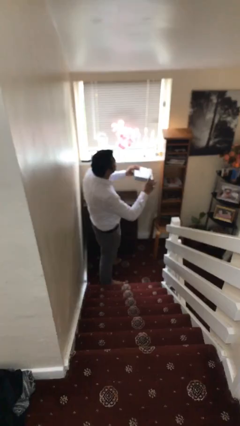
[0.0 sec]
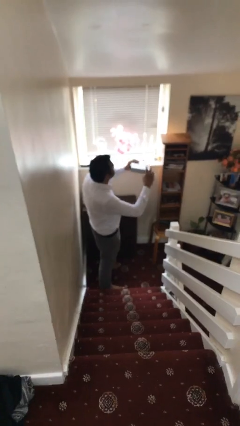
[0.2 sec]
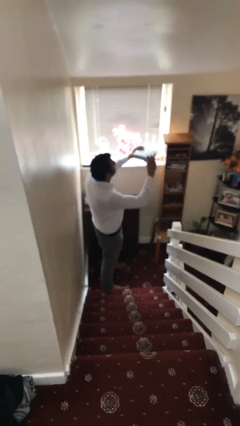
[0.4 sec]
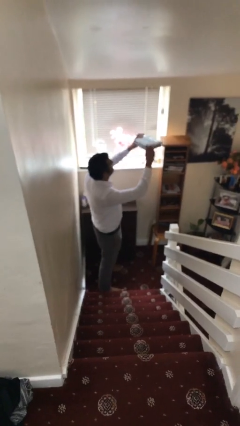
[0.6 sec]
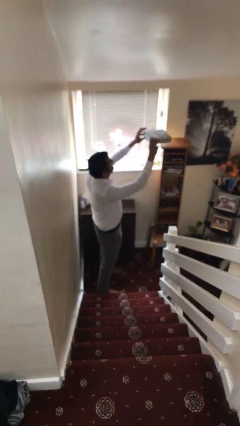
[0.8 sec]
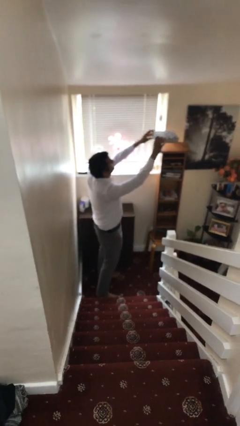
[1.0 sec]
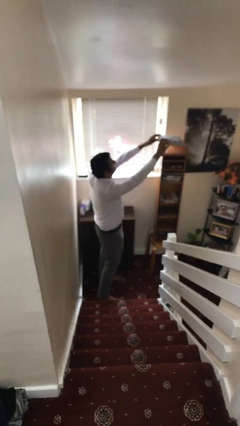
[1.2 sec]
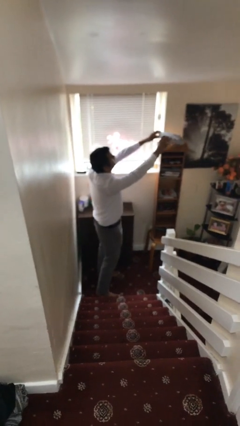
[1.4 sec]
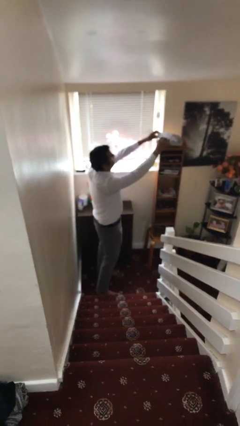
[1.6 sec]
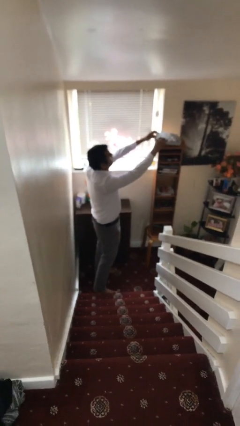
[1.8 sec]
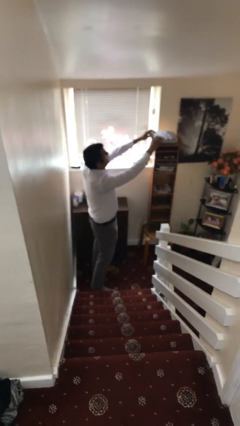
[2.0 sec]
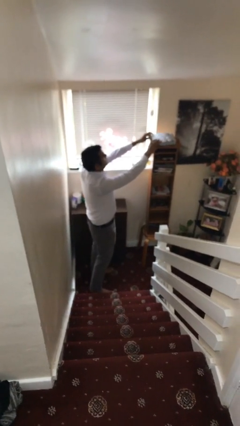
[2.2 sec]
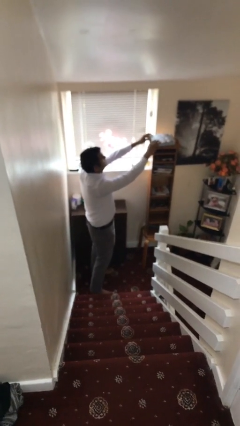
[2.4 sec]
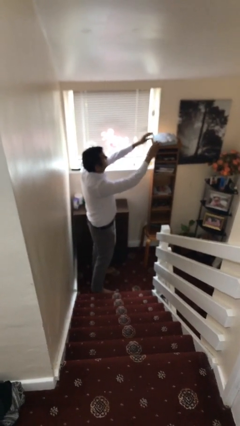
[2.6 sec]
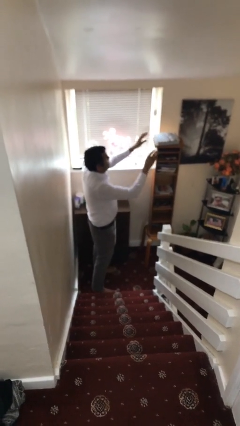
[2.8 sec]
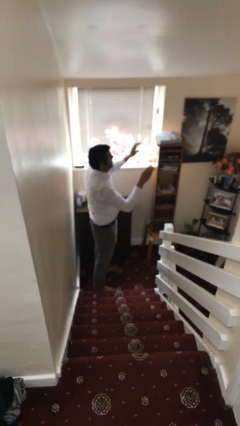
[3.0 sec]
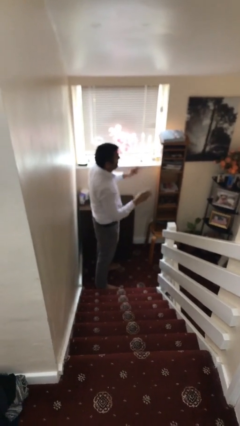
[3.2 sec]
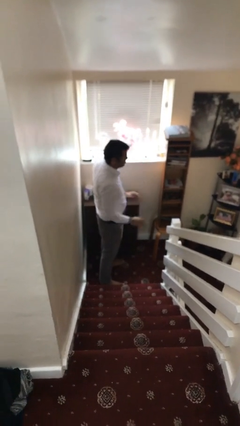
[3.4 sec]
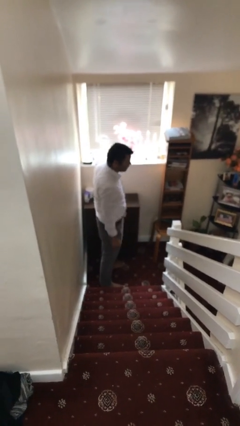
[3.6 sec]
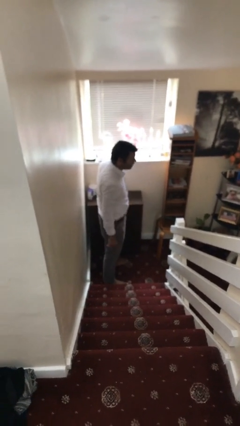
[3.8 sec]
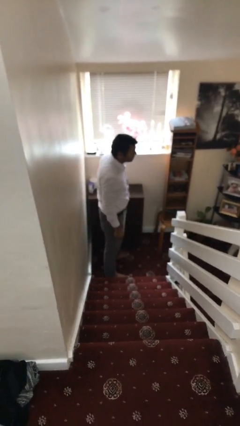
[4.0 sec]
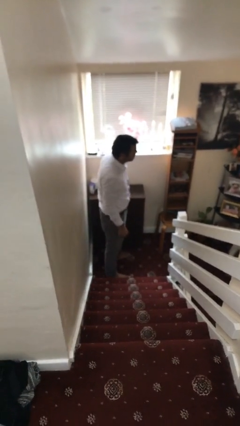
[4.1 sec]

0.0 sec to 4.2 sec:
person puts down object on shelf

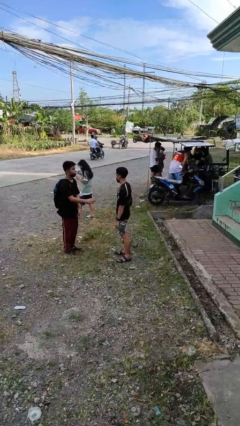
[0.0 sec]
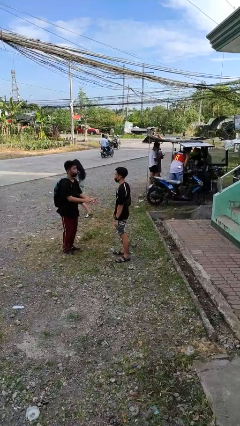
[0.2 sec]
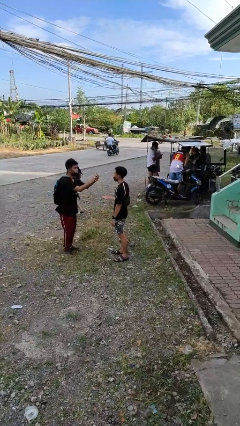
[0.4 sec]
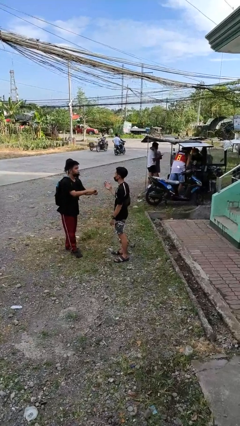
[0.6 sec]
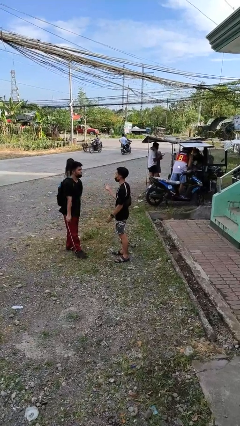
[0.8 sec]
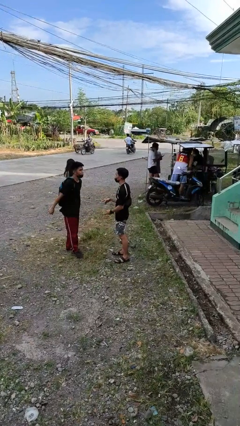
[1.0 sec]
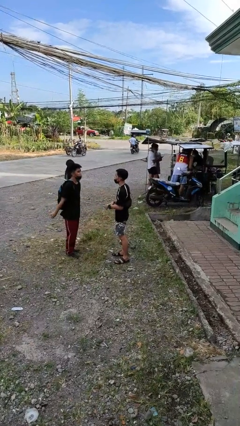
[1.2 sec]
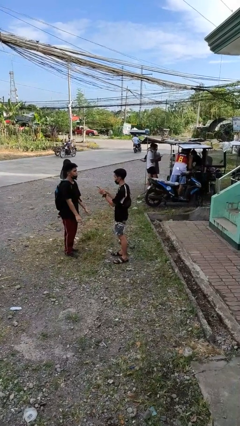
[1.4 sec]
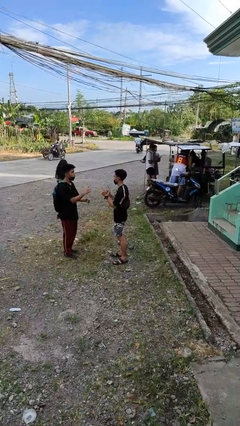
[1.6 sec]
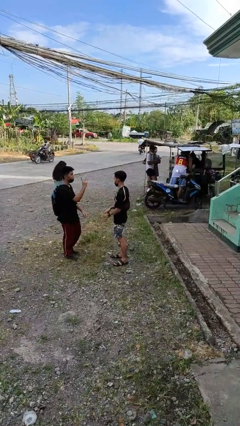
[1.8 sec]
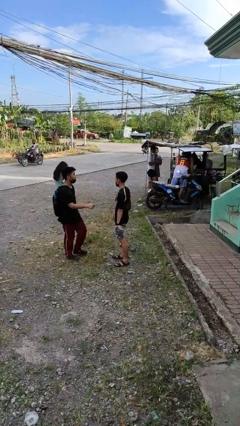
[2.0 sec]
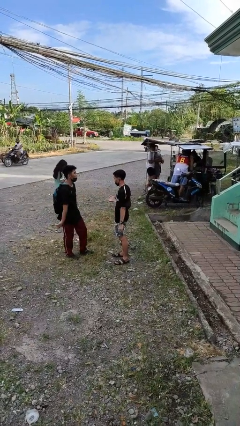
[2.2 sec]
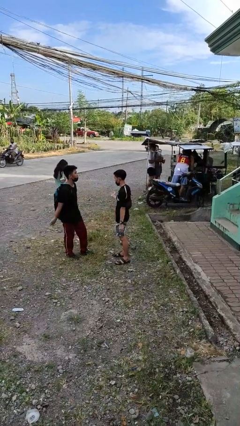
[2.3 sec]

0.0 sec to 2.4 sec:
person talks to person

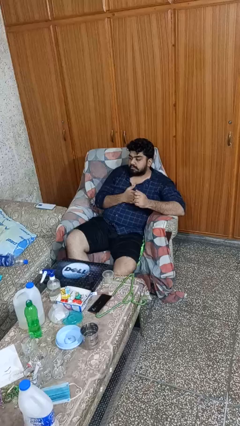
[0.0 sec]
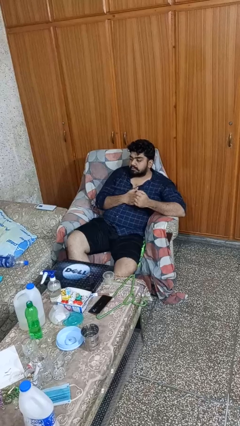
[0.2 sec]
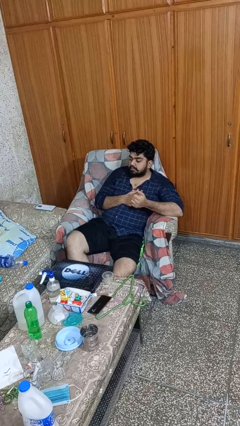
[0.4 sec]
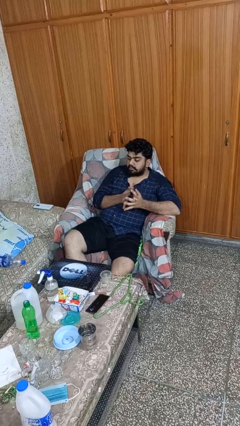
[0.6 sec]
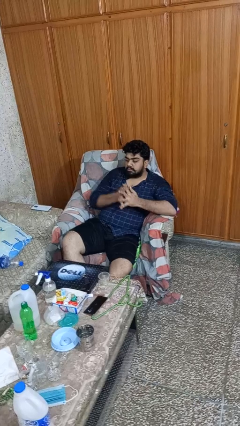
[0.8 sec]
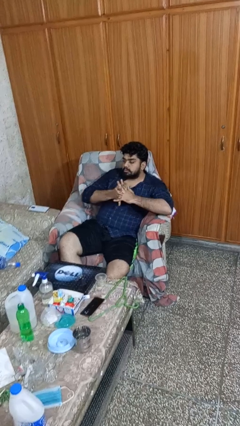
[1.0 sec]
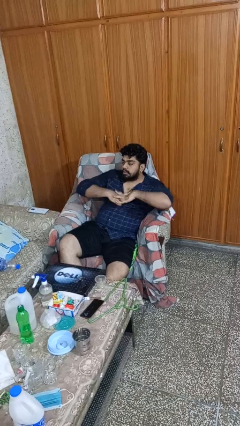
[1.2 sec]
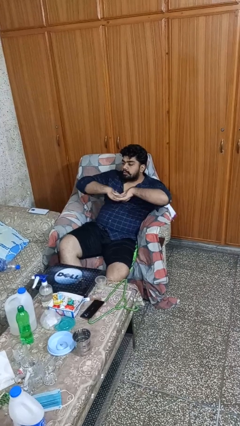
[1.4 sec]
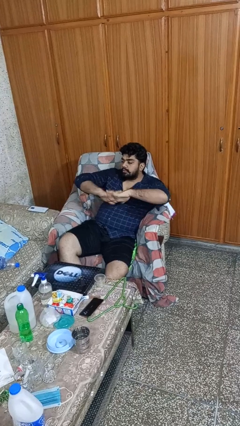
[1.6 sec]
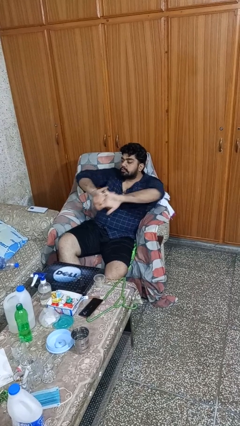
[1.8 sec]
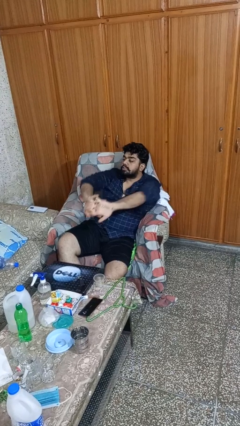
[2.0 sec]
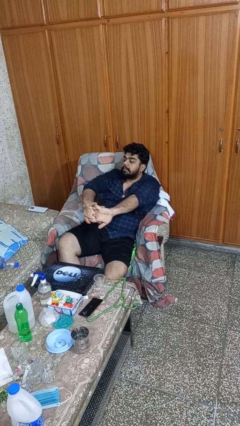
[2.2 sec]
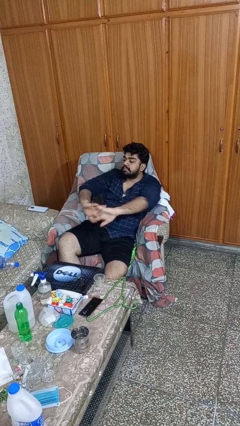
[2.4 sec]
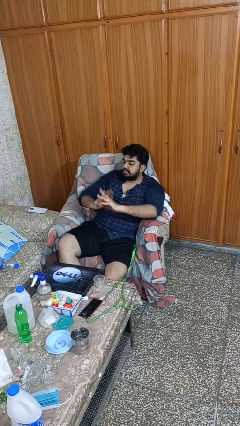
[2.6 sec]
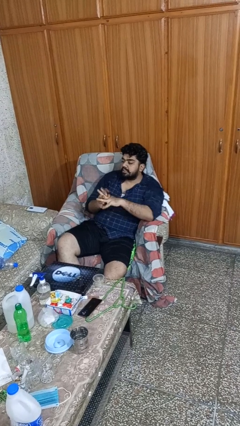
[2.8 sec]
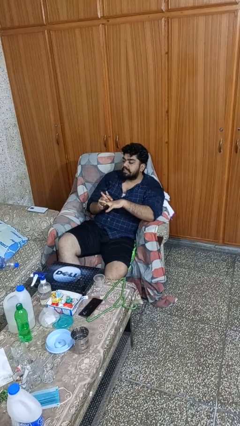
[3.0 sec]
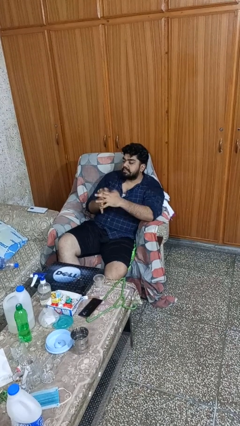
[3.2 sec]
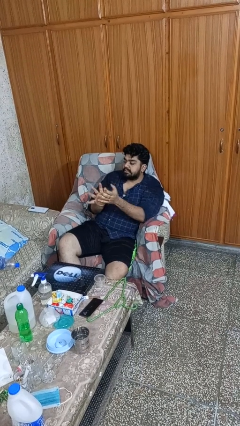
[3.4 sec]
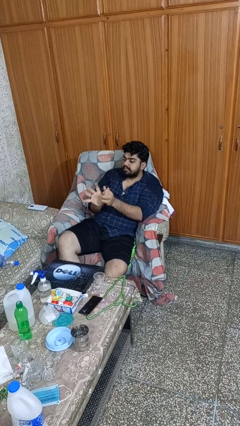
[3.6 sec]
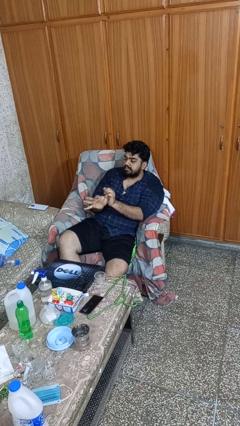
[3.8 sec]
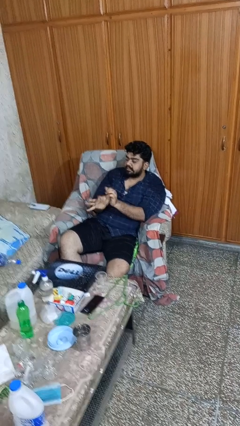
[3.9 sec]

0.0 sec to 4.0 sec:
person cracks knuckles

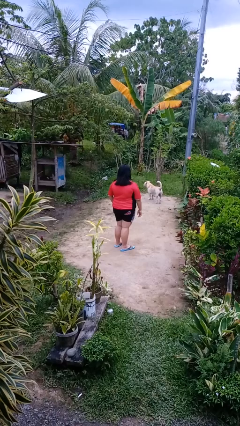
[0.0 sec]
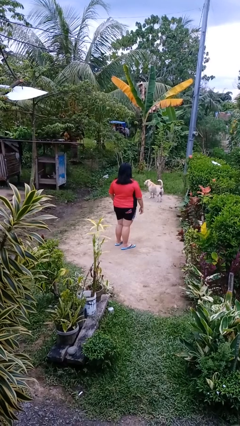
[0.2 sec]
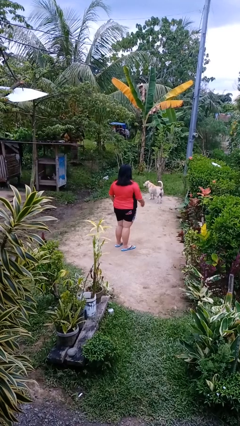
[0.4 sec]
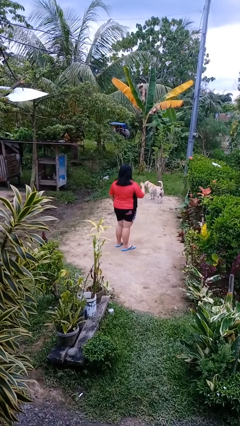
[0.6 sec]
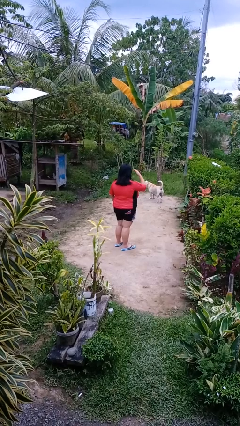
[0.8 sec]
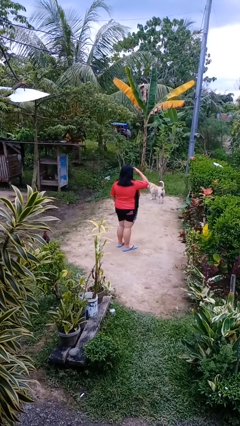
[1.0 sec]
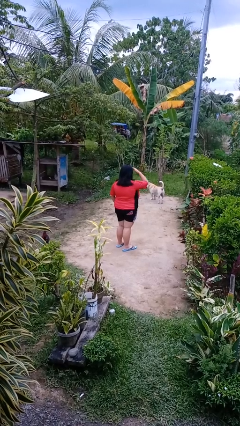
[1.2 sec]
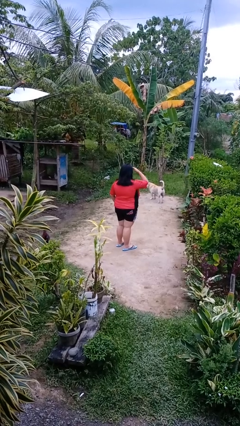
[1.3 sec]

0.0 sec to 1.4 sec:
person shades eyes

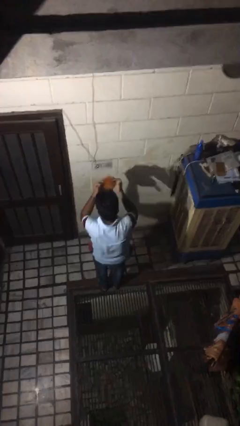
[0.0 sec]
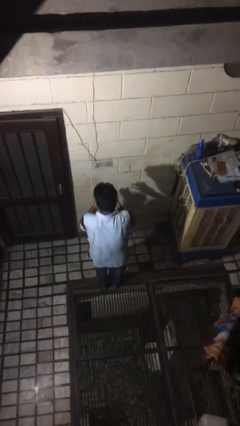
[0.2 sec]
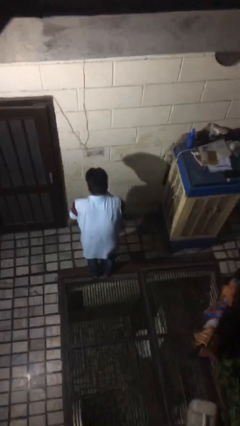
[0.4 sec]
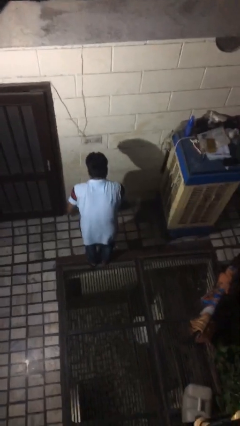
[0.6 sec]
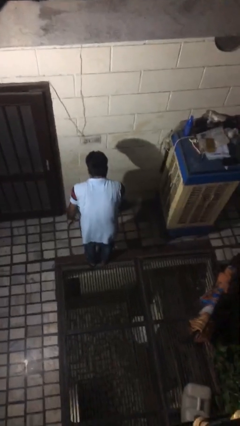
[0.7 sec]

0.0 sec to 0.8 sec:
person catches dropped object

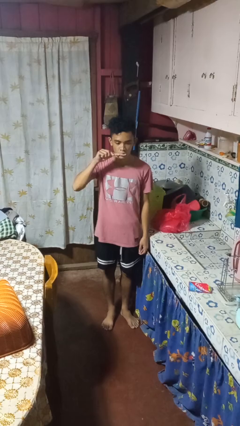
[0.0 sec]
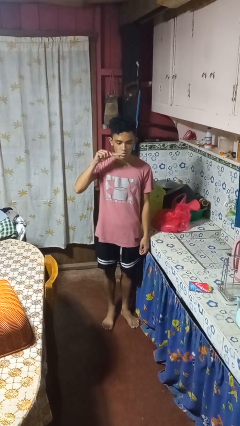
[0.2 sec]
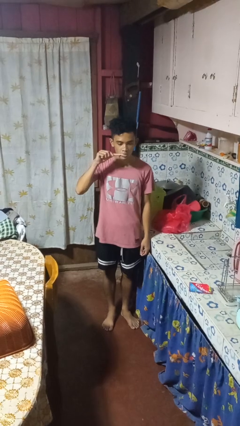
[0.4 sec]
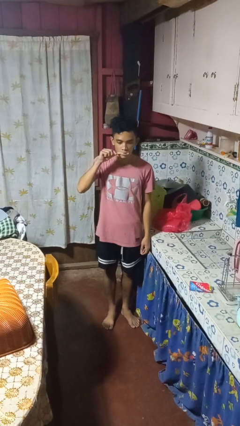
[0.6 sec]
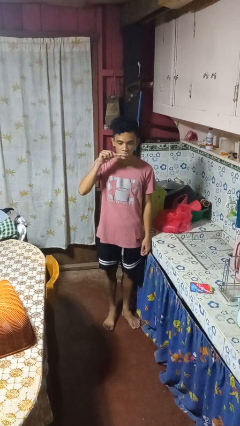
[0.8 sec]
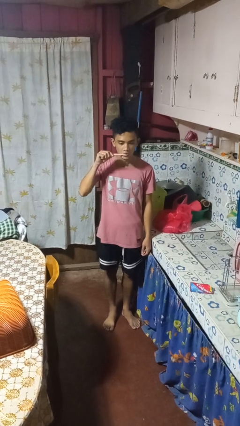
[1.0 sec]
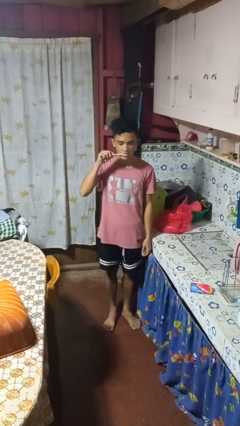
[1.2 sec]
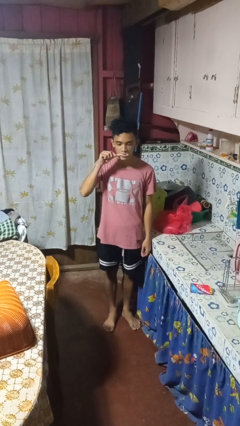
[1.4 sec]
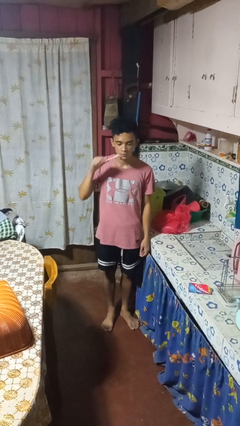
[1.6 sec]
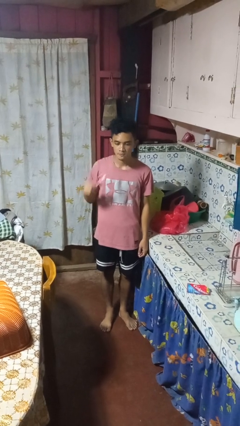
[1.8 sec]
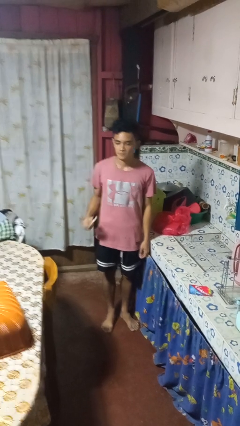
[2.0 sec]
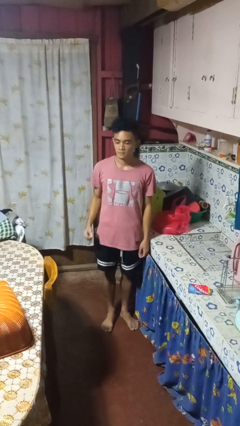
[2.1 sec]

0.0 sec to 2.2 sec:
person brushes teeth

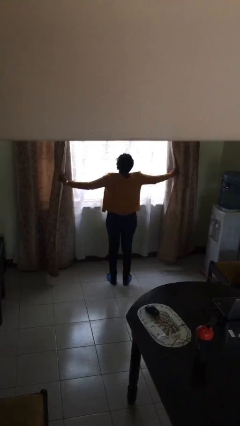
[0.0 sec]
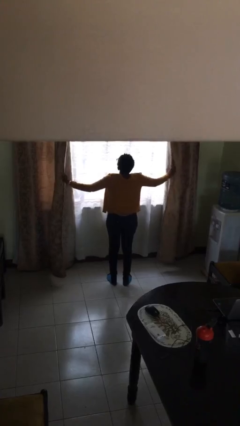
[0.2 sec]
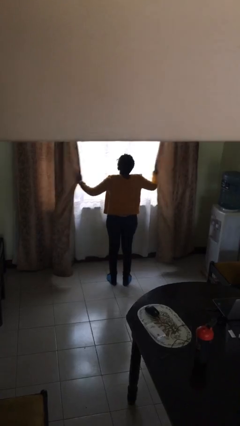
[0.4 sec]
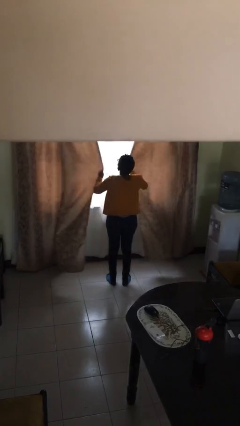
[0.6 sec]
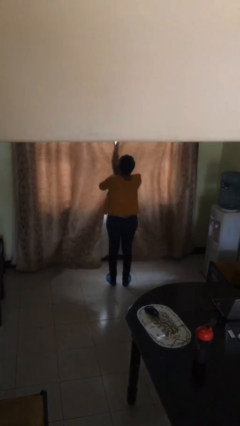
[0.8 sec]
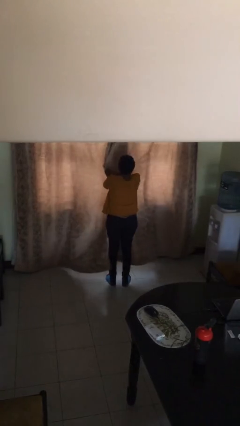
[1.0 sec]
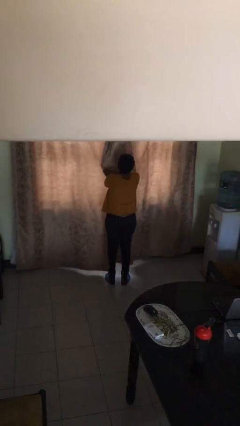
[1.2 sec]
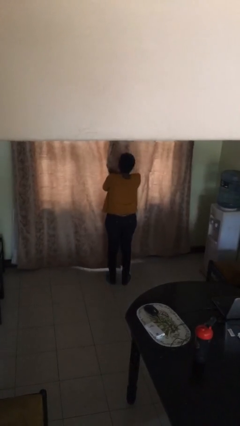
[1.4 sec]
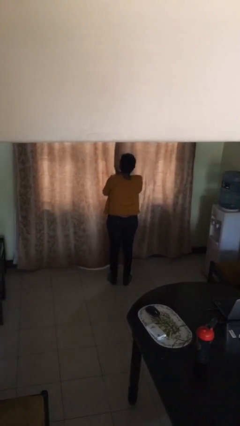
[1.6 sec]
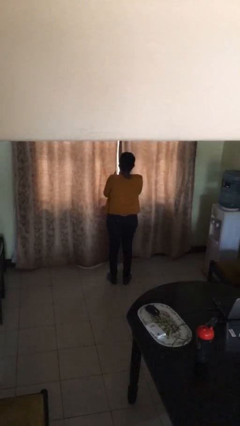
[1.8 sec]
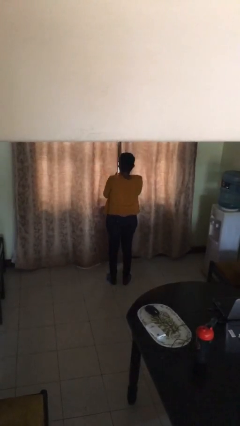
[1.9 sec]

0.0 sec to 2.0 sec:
person closes curtains
